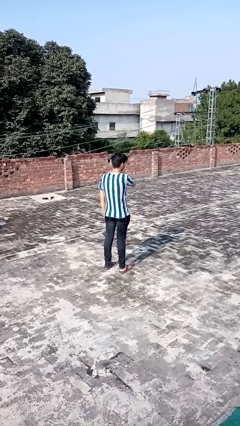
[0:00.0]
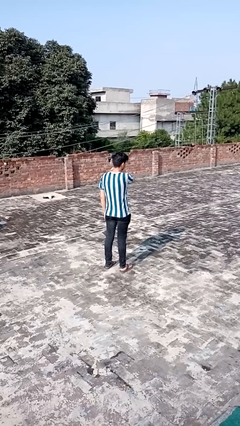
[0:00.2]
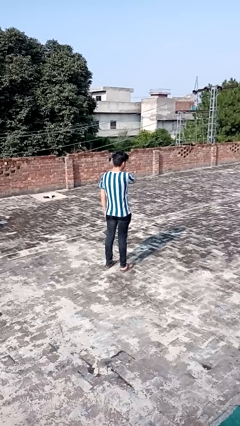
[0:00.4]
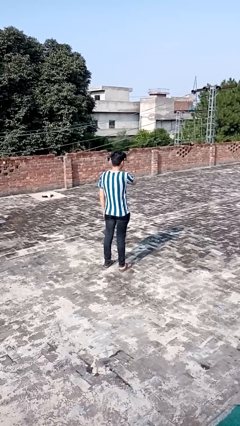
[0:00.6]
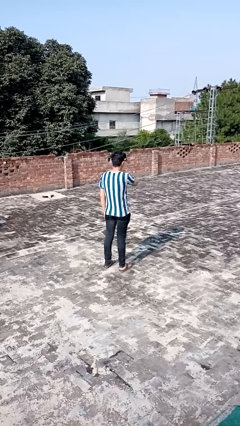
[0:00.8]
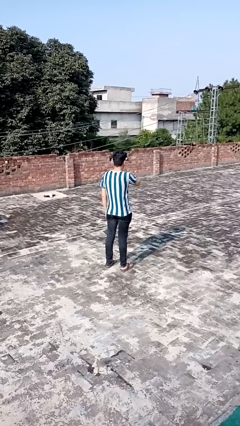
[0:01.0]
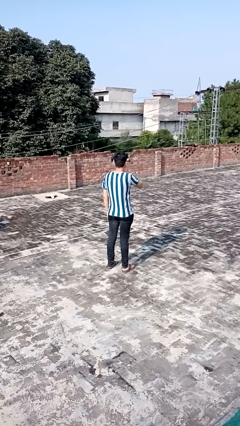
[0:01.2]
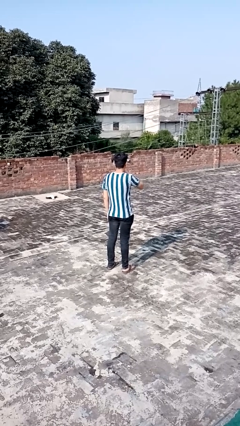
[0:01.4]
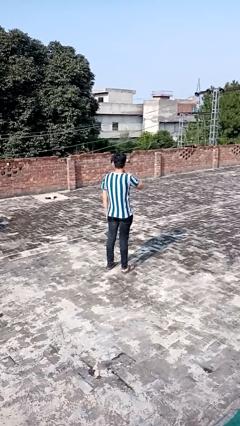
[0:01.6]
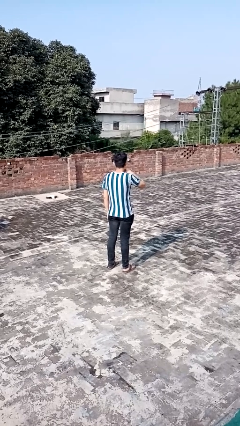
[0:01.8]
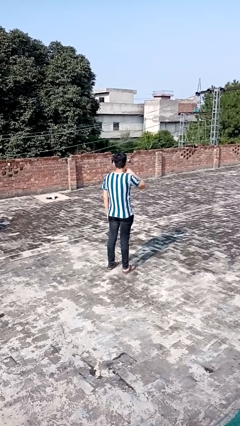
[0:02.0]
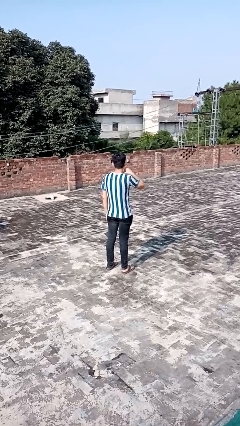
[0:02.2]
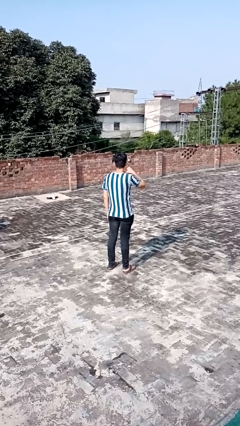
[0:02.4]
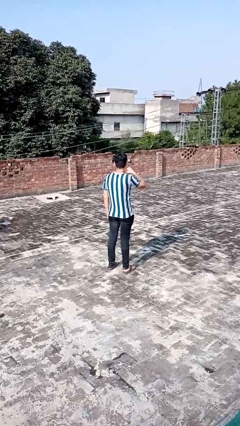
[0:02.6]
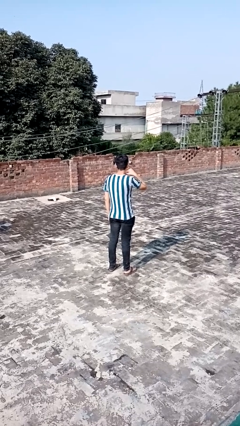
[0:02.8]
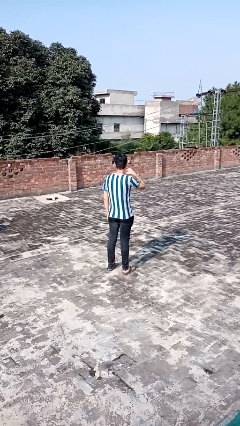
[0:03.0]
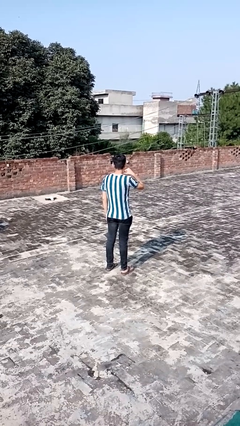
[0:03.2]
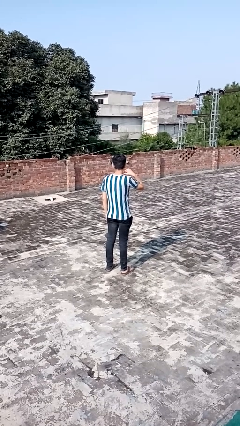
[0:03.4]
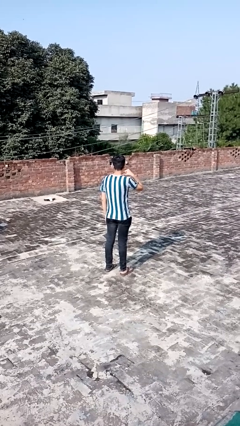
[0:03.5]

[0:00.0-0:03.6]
person gestures cut

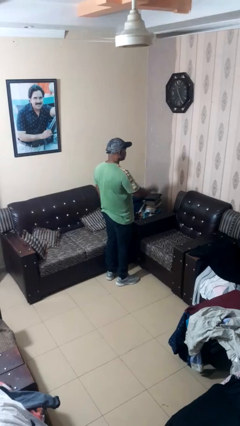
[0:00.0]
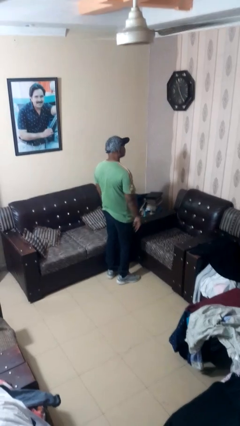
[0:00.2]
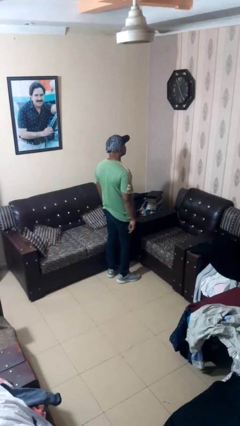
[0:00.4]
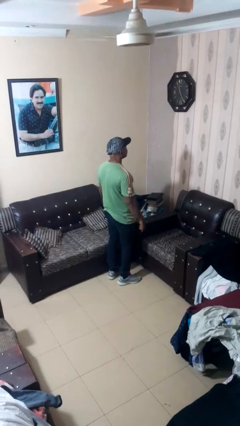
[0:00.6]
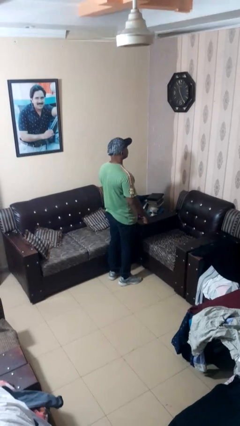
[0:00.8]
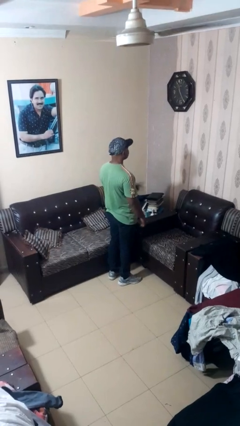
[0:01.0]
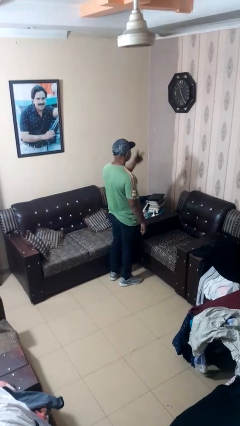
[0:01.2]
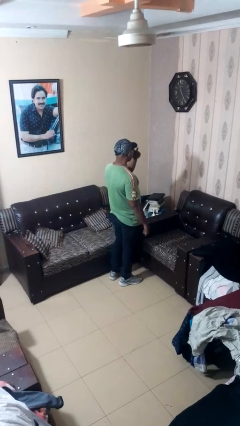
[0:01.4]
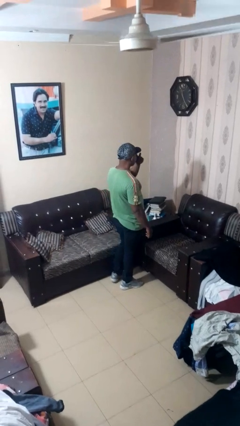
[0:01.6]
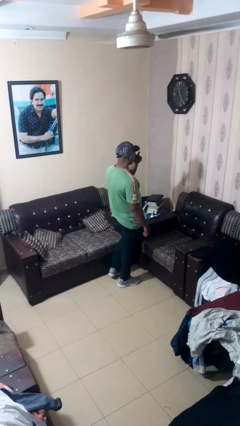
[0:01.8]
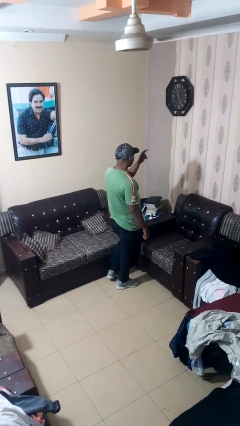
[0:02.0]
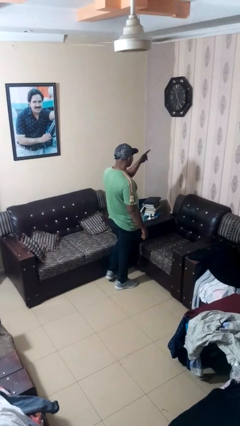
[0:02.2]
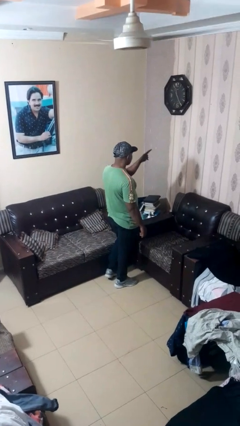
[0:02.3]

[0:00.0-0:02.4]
person gestures watch closely

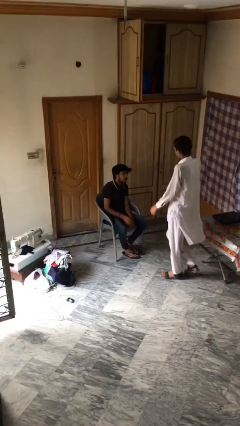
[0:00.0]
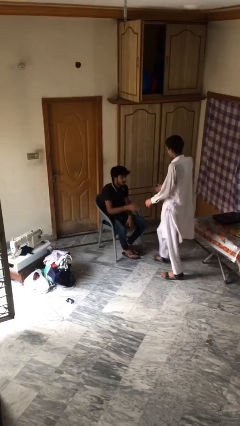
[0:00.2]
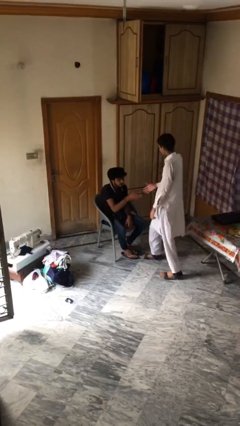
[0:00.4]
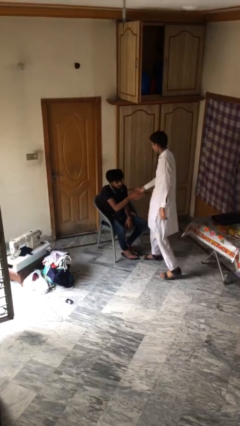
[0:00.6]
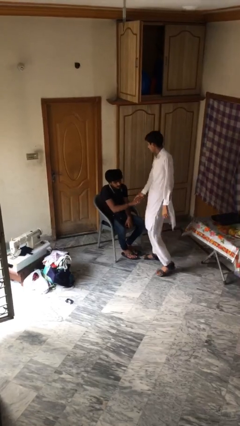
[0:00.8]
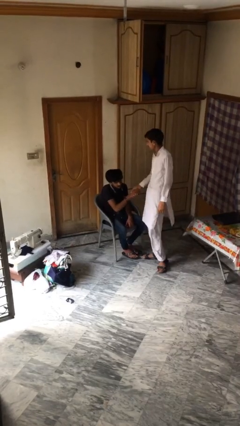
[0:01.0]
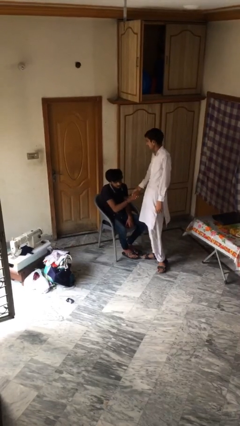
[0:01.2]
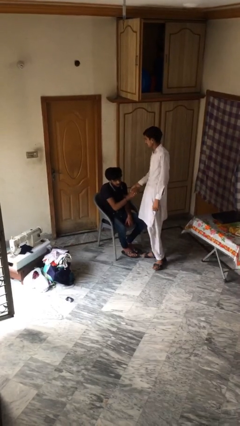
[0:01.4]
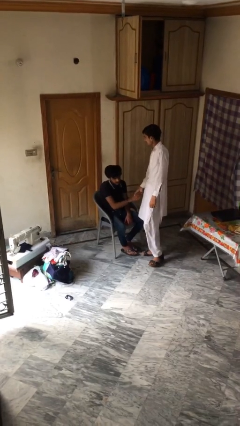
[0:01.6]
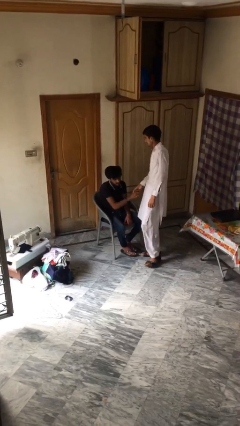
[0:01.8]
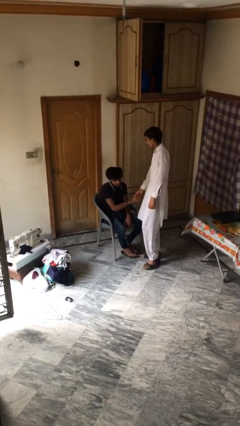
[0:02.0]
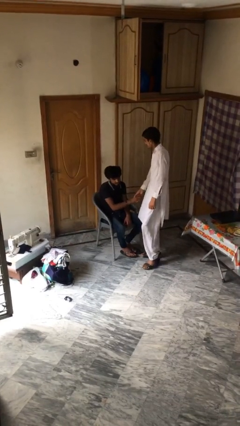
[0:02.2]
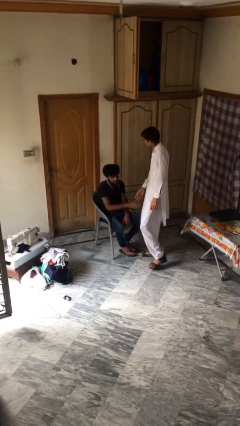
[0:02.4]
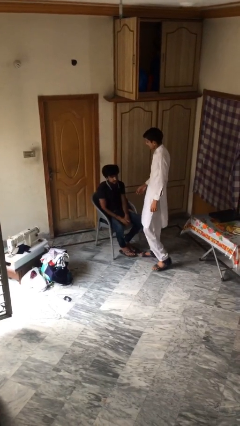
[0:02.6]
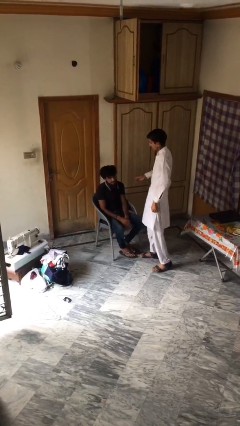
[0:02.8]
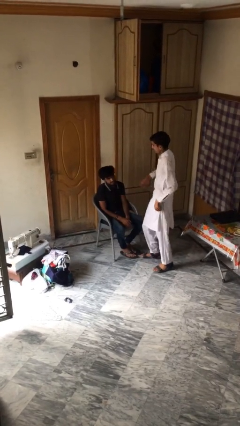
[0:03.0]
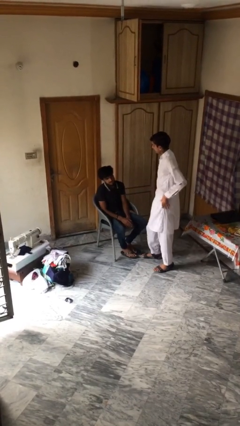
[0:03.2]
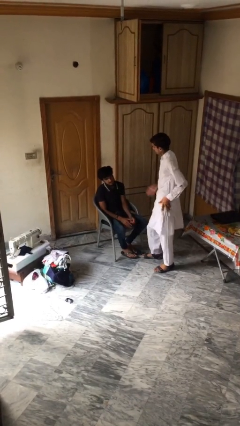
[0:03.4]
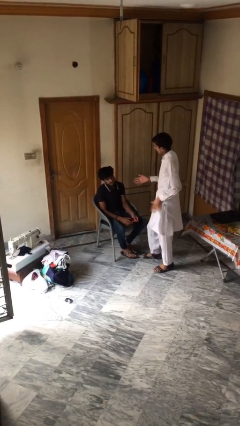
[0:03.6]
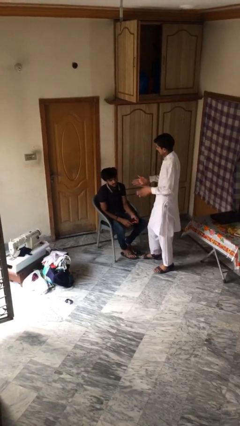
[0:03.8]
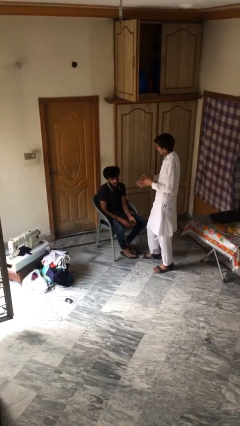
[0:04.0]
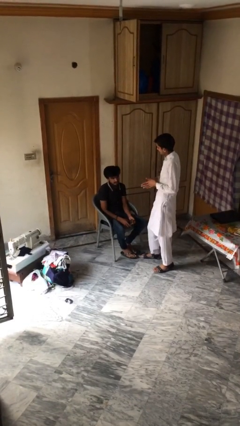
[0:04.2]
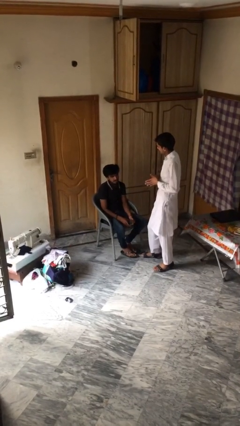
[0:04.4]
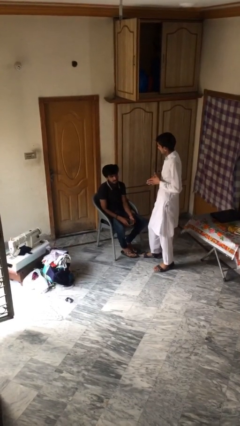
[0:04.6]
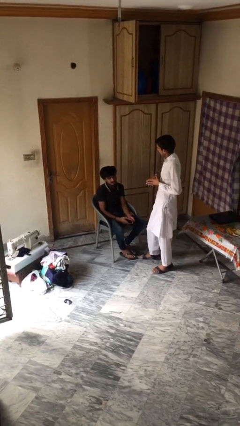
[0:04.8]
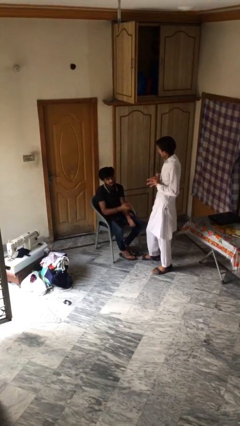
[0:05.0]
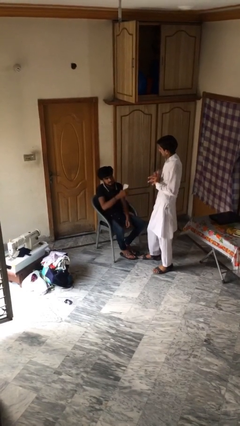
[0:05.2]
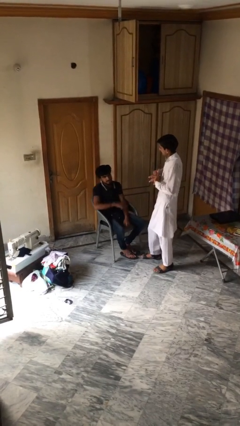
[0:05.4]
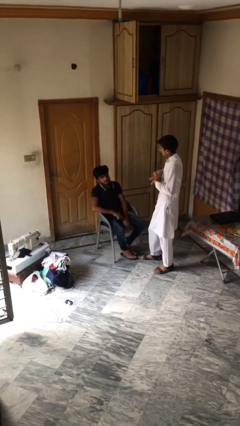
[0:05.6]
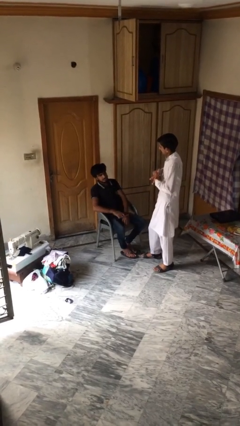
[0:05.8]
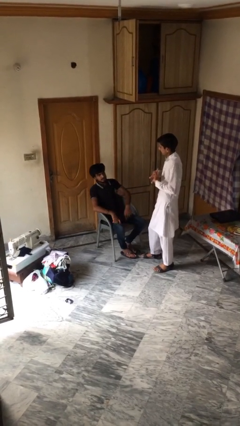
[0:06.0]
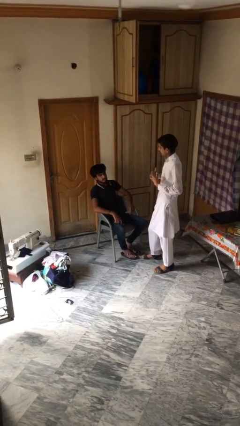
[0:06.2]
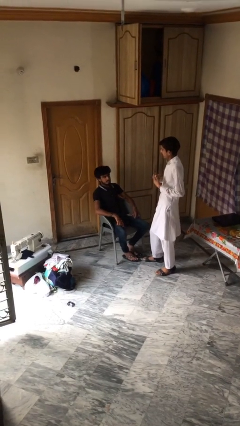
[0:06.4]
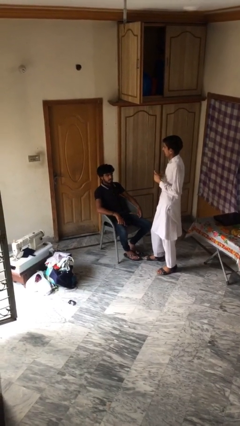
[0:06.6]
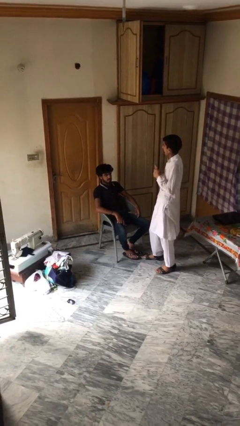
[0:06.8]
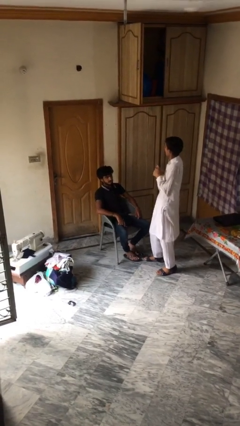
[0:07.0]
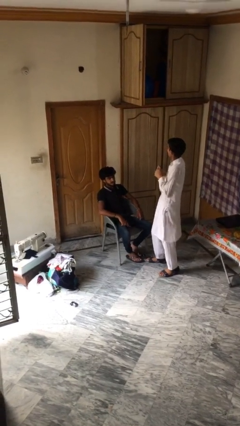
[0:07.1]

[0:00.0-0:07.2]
person shakes hand

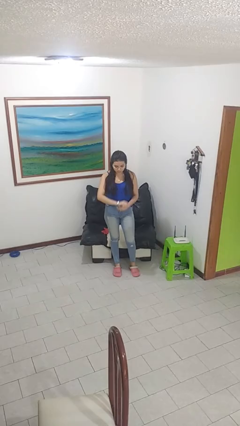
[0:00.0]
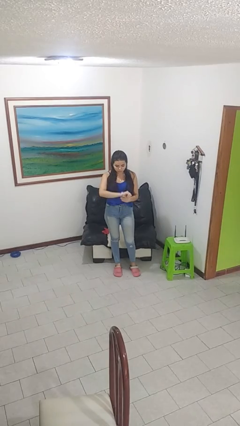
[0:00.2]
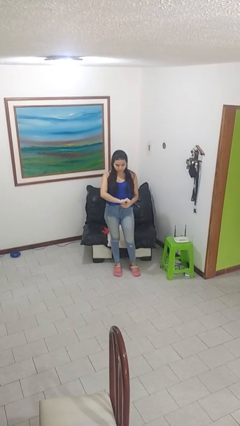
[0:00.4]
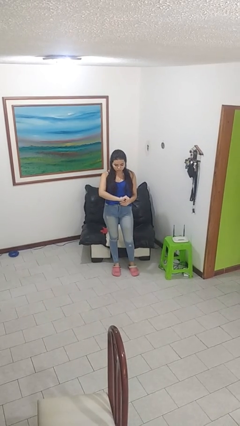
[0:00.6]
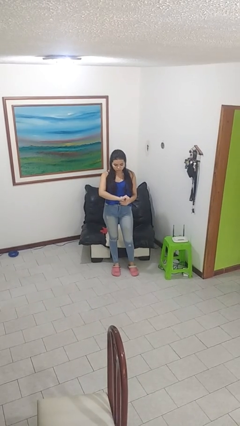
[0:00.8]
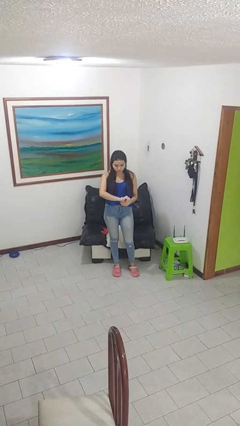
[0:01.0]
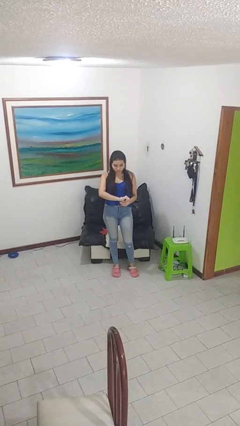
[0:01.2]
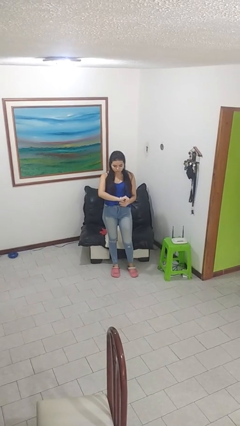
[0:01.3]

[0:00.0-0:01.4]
person looks at wristwatch

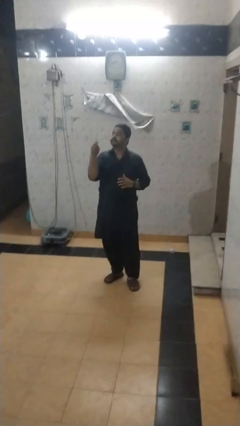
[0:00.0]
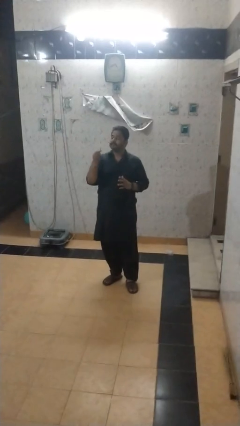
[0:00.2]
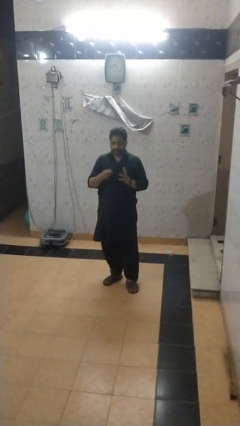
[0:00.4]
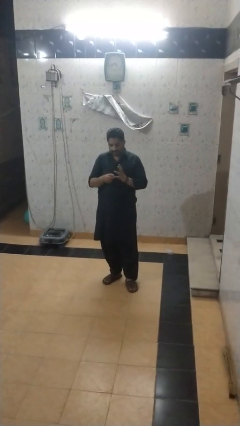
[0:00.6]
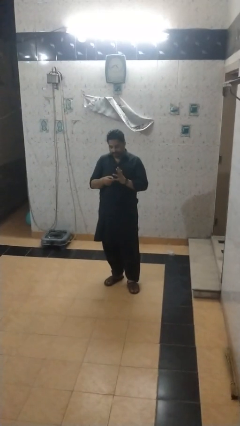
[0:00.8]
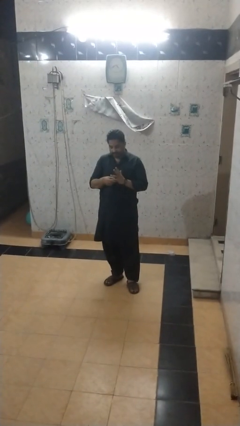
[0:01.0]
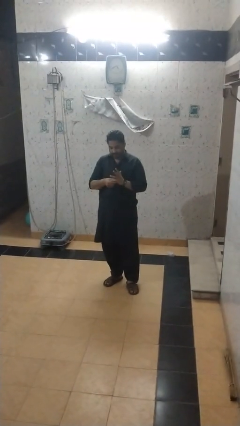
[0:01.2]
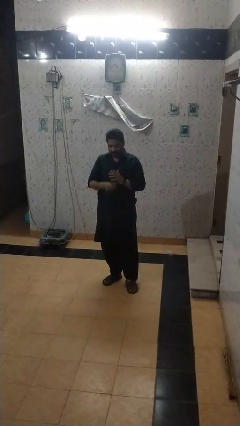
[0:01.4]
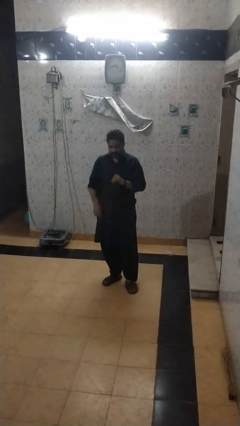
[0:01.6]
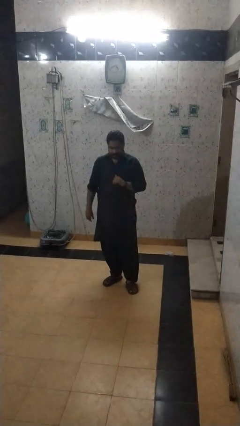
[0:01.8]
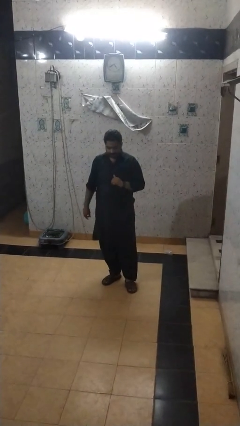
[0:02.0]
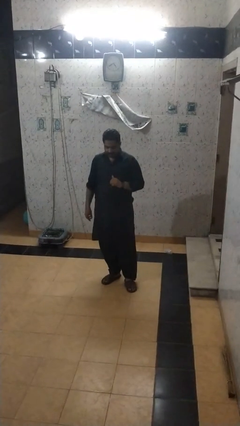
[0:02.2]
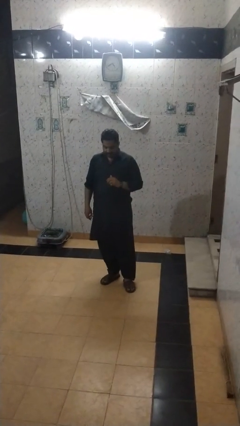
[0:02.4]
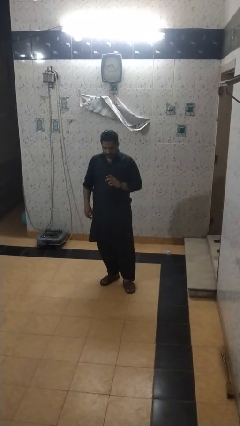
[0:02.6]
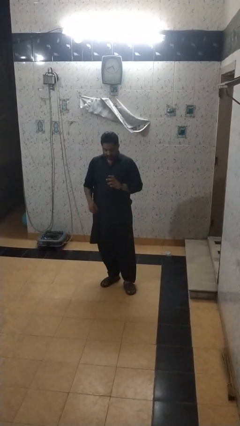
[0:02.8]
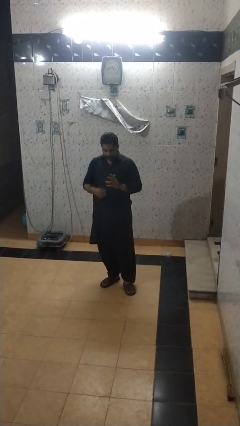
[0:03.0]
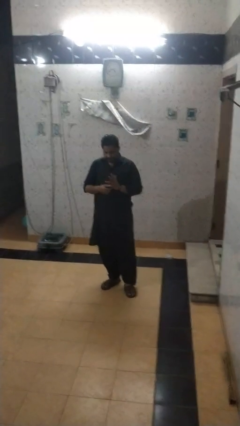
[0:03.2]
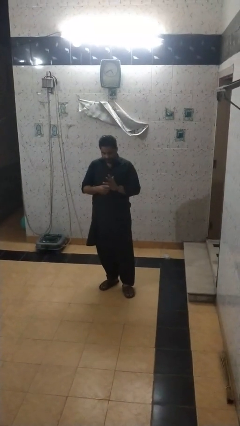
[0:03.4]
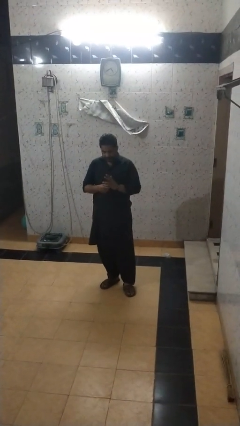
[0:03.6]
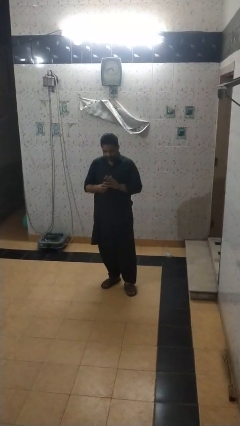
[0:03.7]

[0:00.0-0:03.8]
person puts on ring
